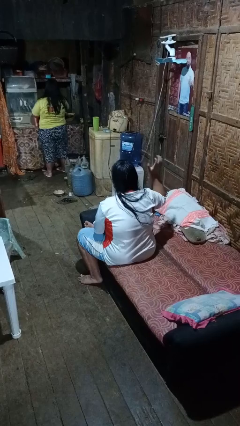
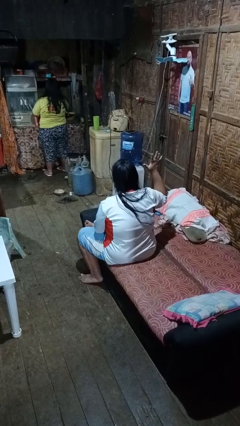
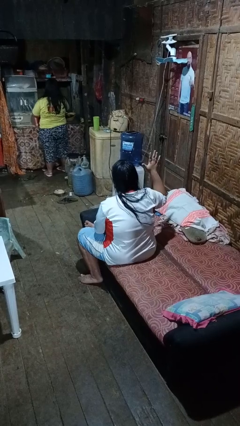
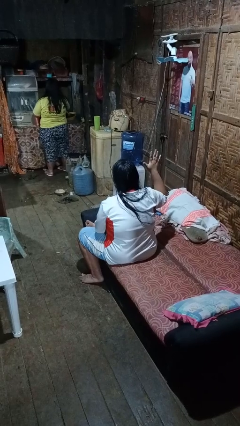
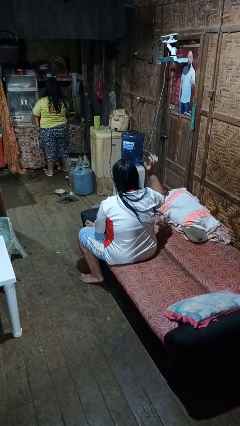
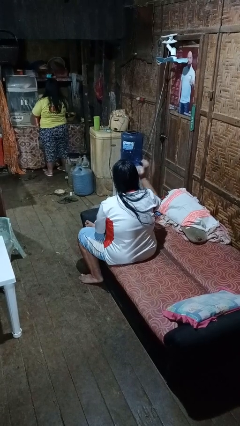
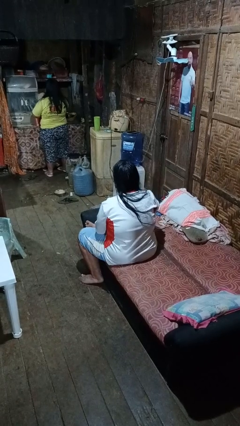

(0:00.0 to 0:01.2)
person gestures number five

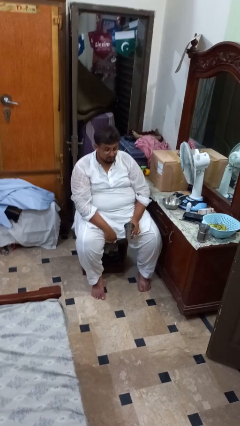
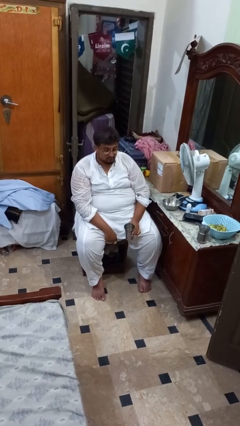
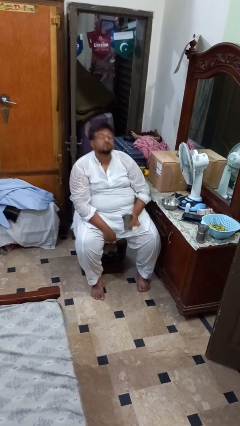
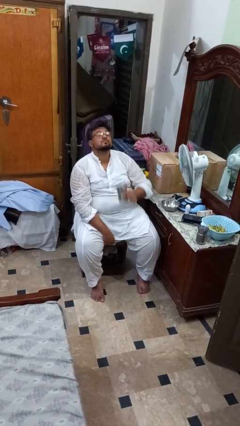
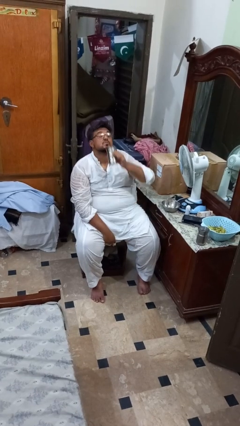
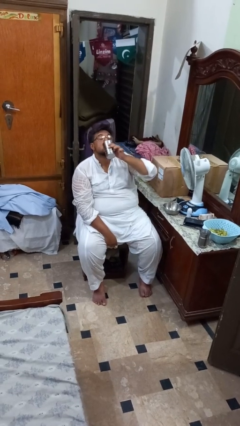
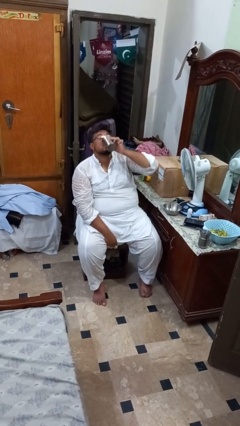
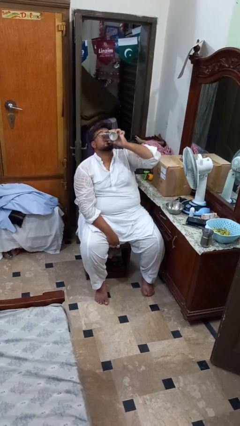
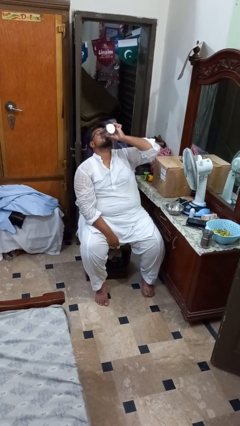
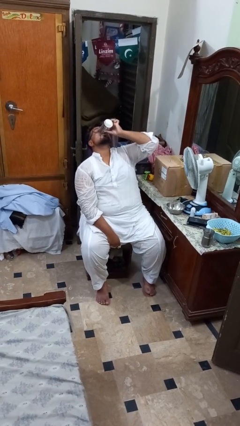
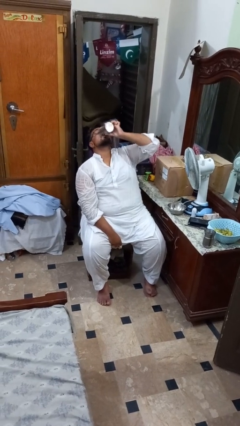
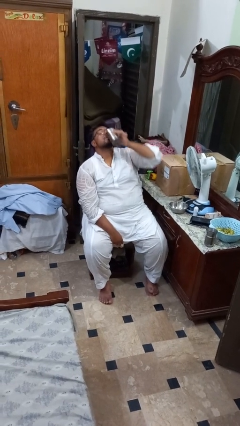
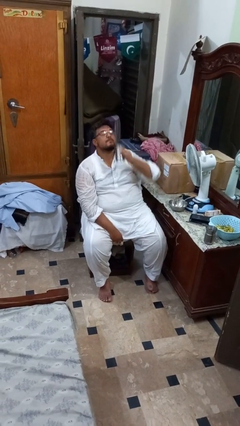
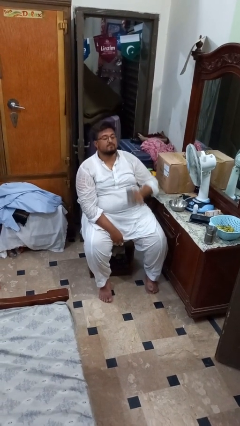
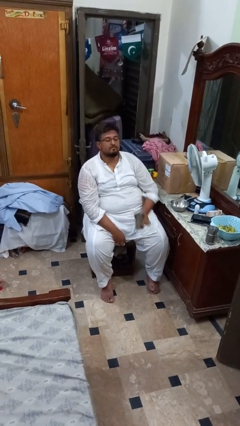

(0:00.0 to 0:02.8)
person drinks from cup

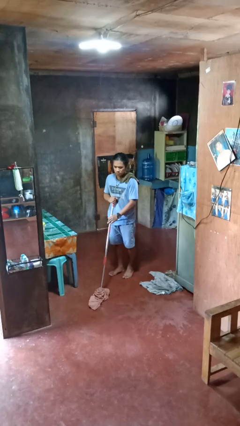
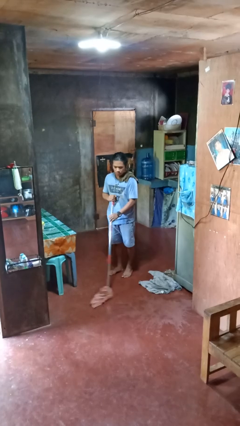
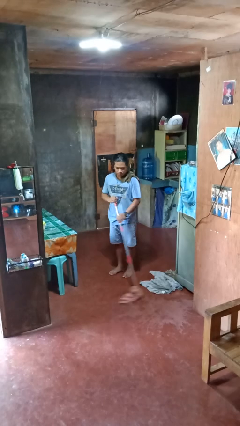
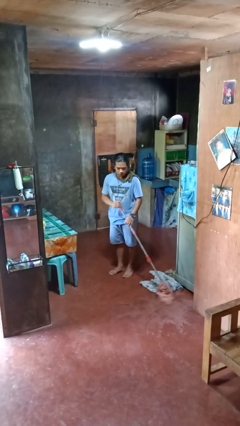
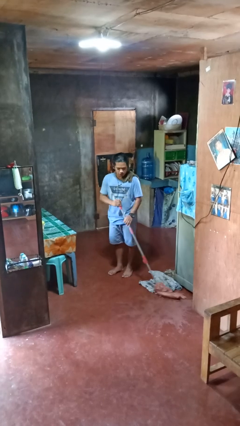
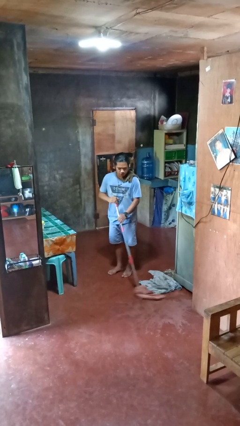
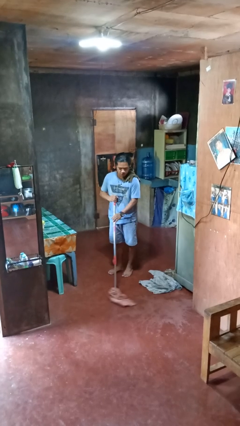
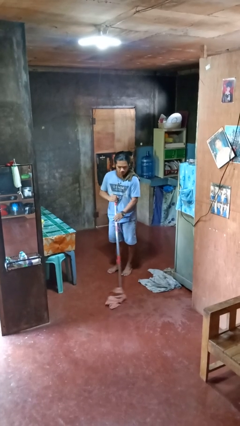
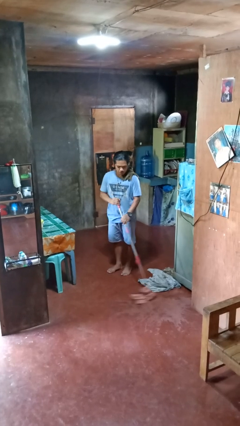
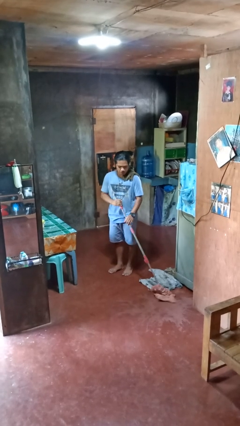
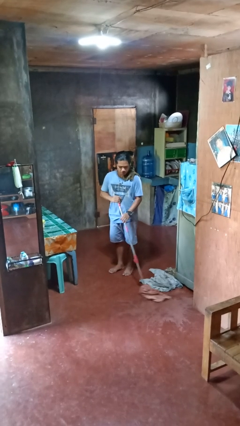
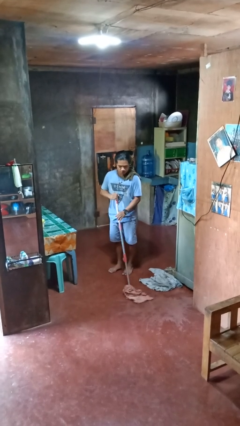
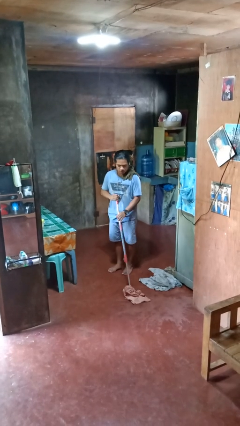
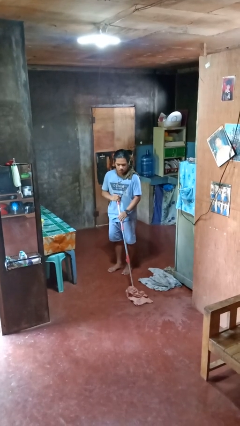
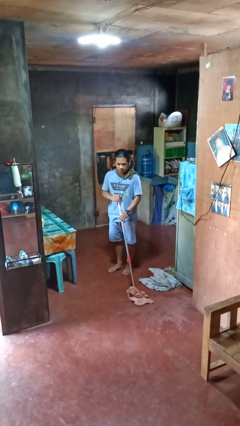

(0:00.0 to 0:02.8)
person mops

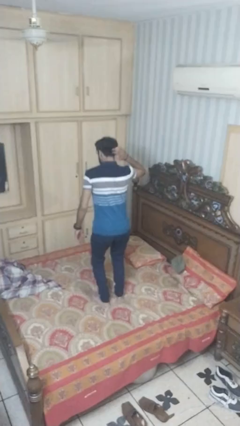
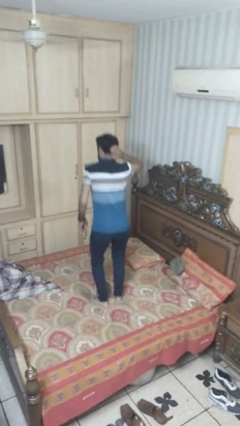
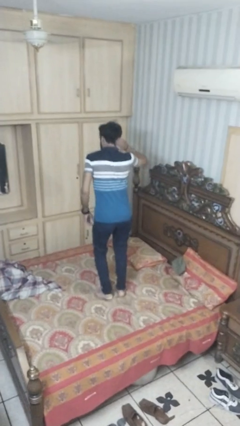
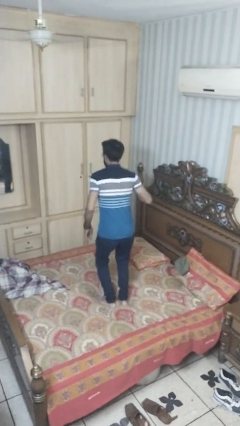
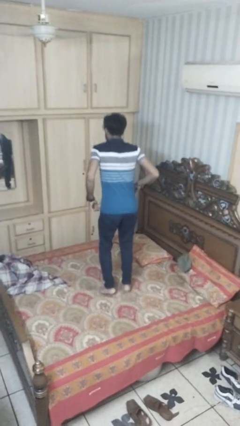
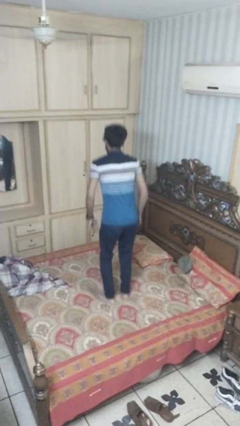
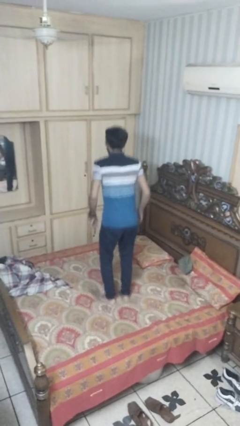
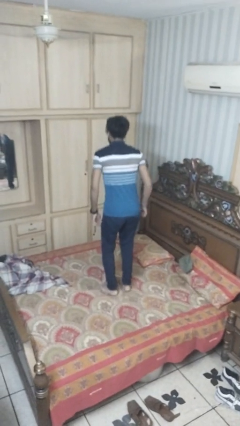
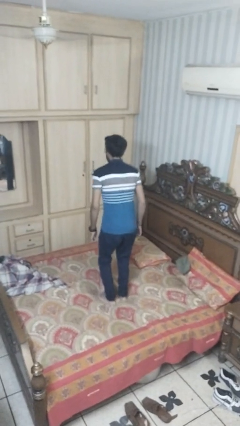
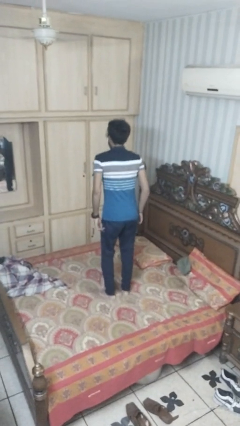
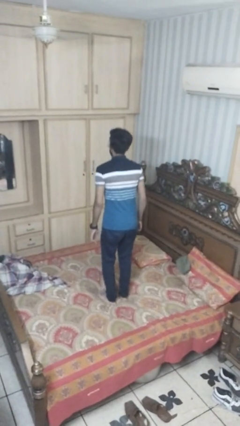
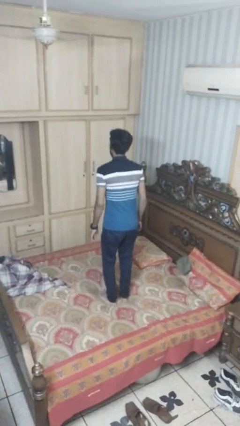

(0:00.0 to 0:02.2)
person jumps on bed

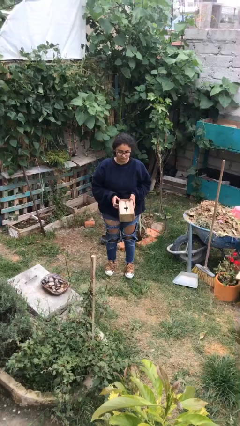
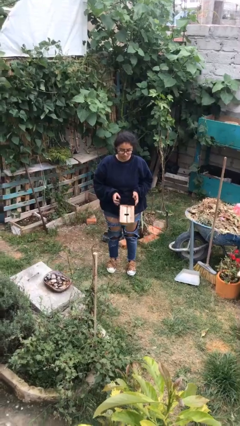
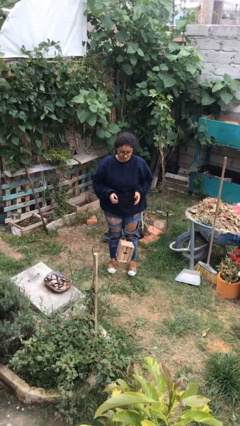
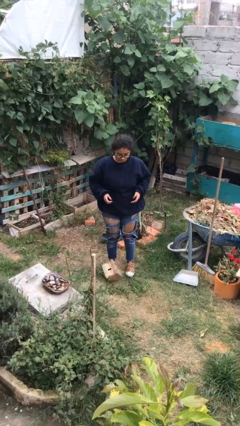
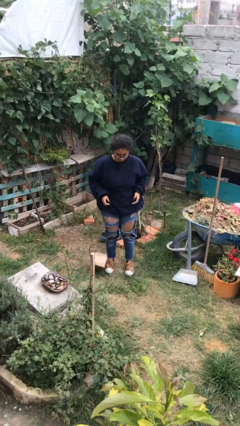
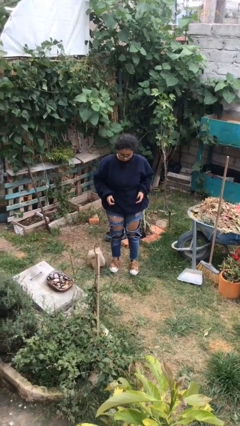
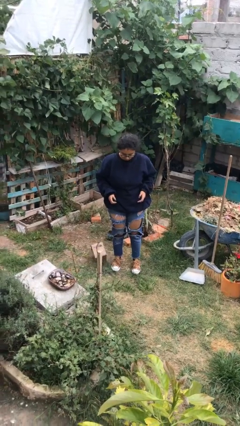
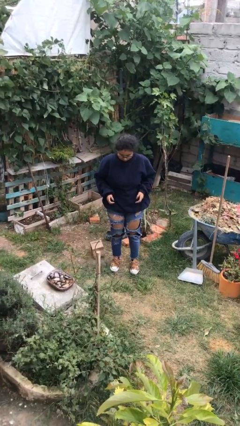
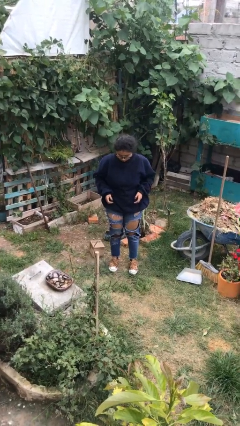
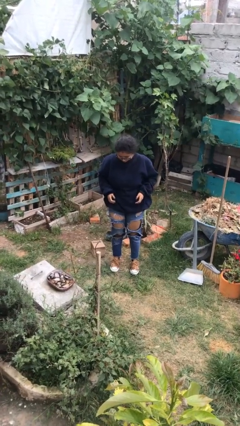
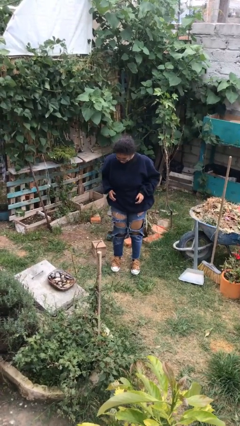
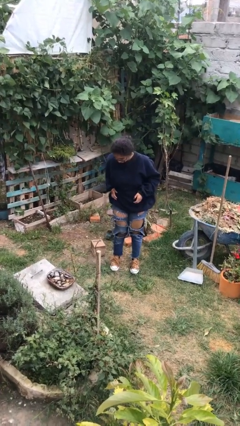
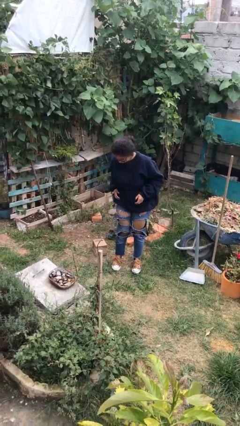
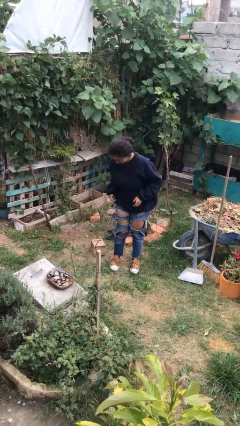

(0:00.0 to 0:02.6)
person drops object

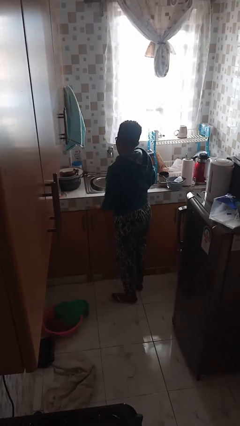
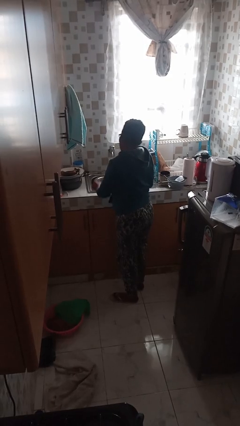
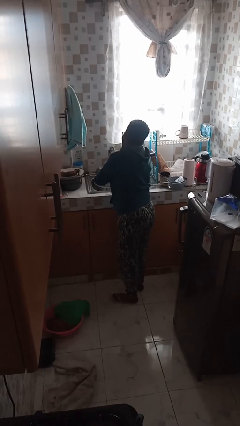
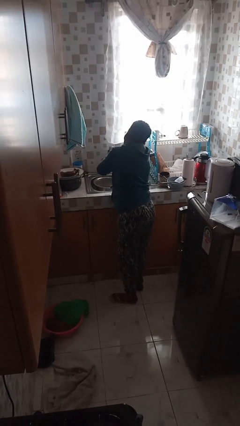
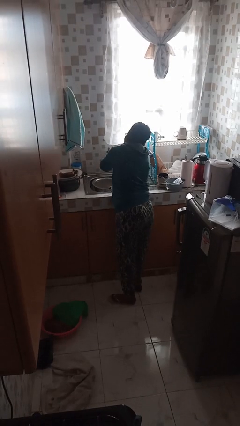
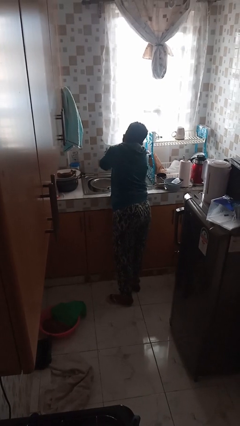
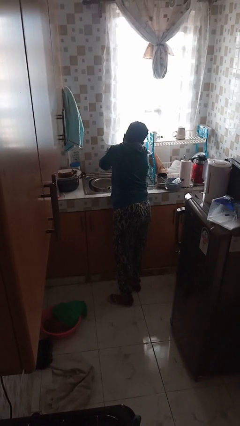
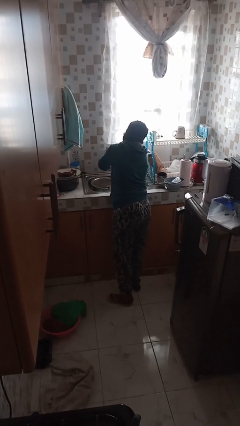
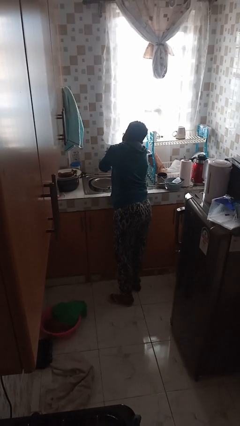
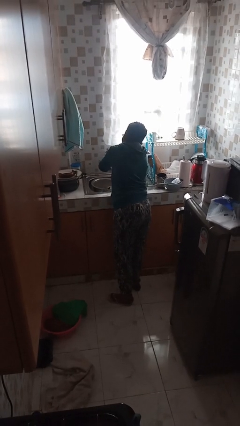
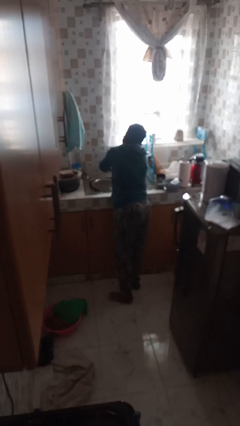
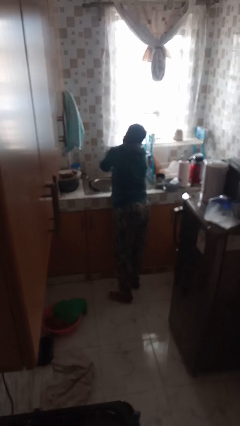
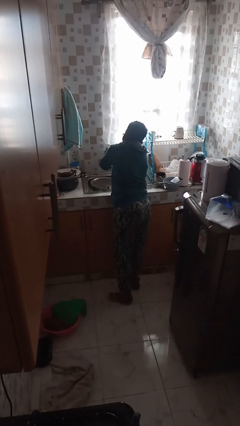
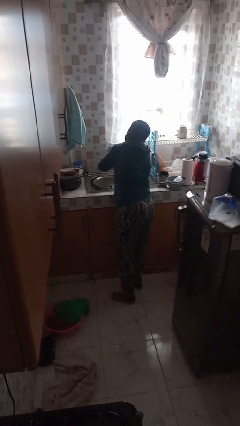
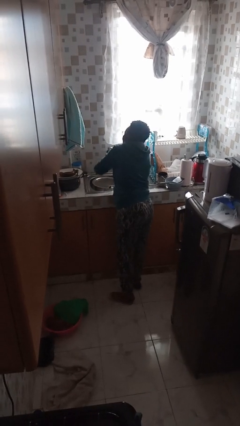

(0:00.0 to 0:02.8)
person washes hands

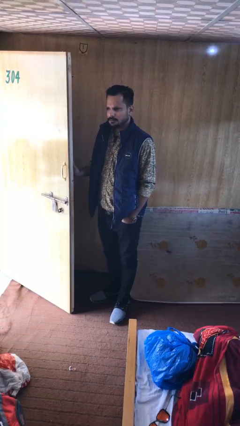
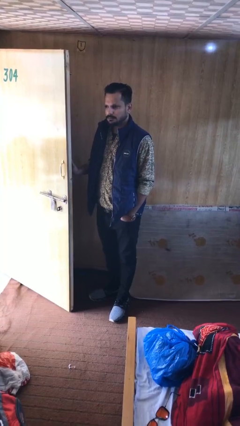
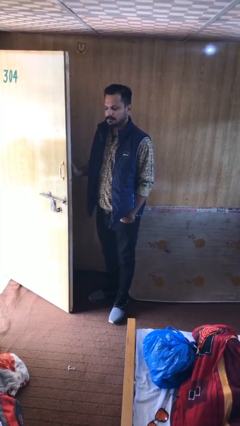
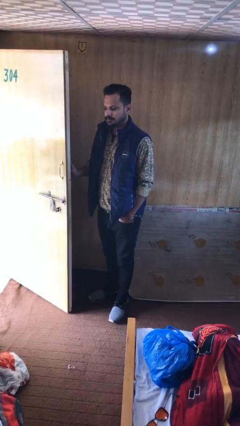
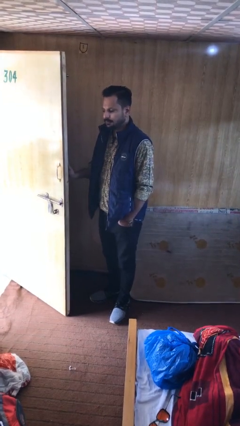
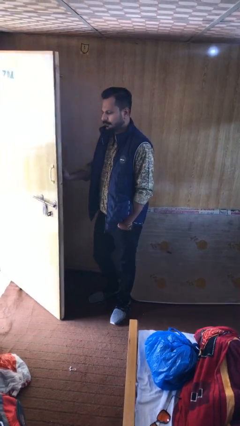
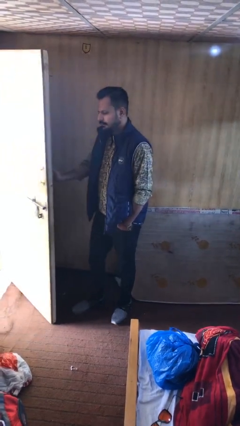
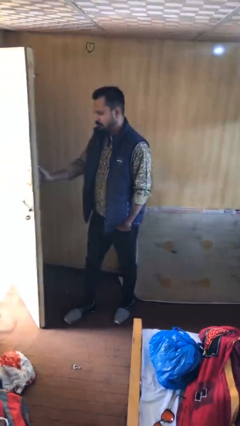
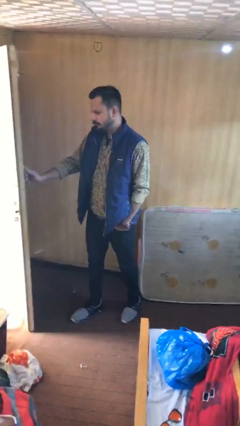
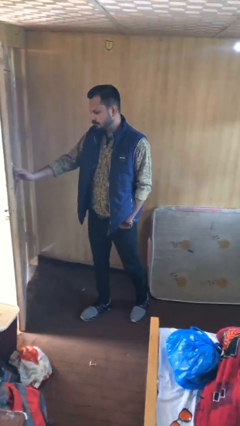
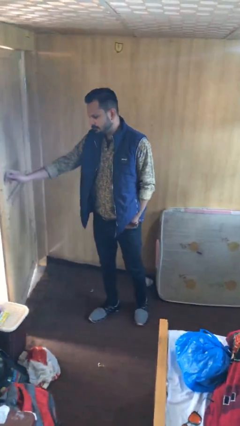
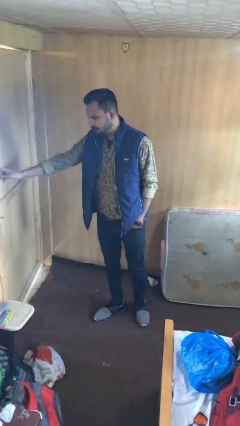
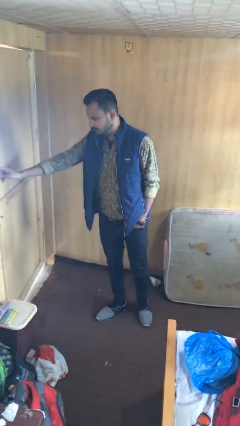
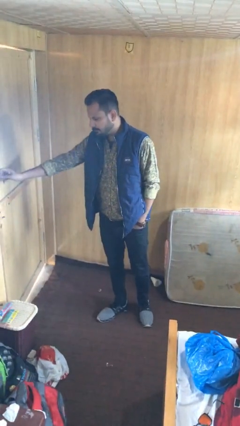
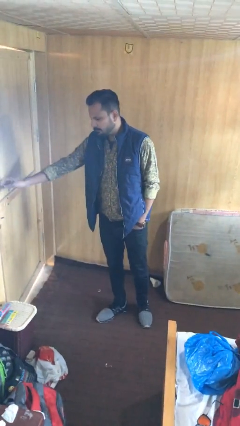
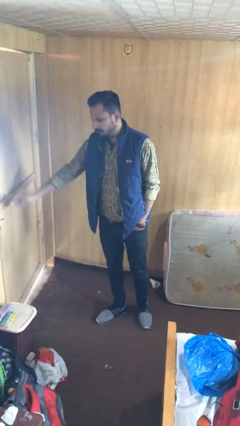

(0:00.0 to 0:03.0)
person closes facility door
